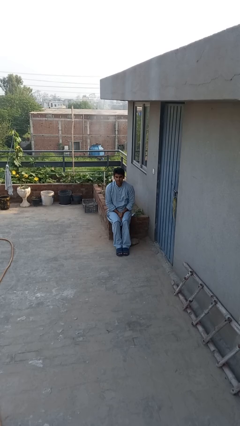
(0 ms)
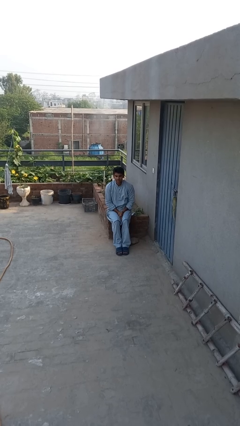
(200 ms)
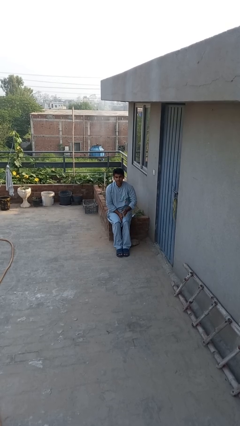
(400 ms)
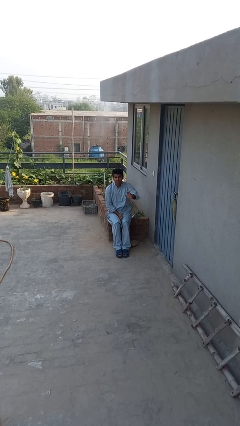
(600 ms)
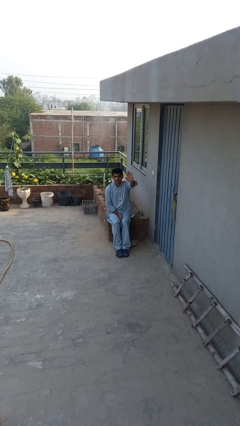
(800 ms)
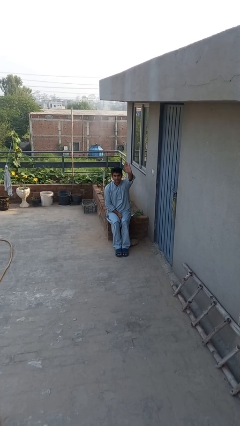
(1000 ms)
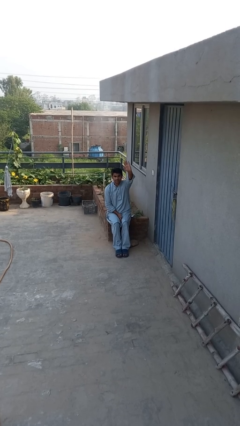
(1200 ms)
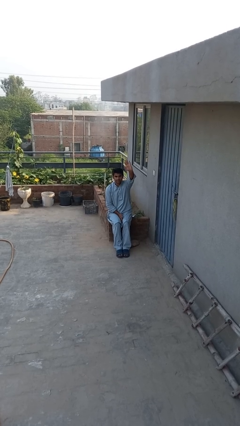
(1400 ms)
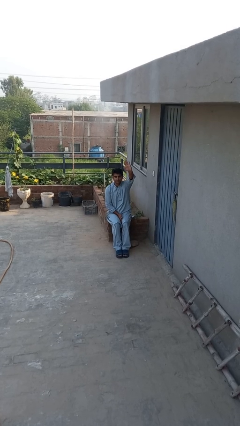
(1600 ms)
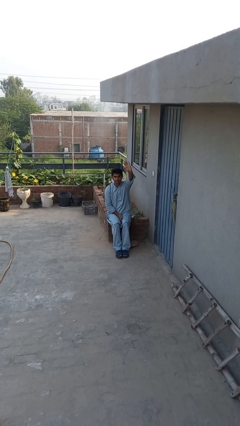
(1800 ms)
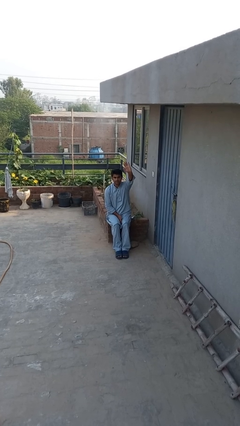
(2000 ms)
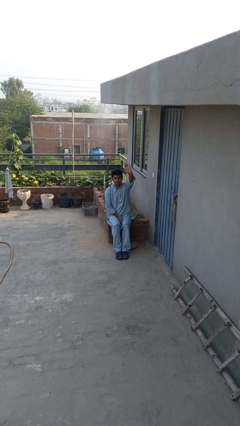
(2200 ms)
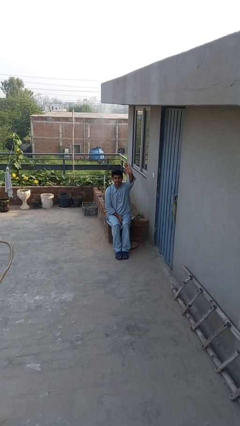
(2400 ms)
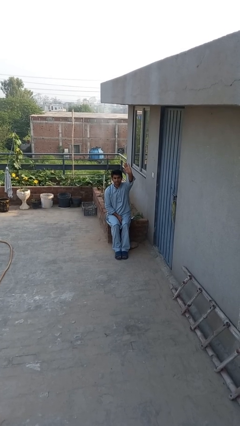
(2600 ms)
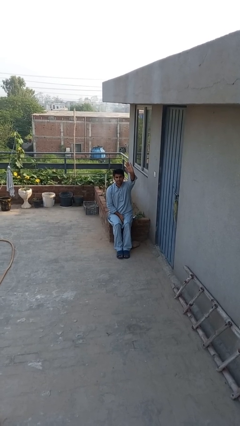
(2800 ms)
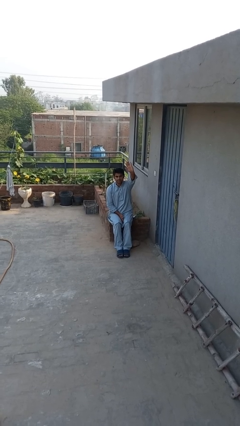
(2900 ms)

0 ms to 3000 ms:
person gestures raise hand

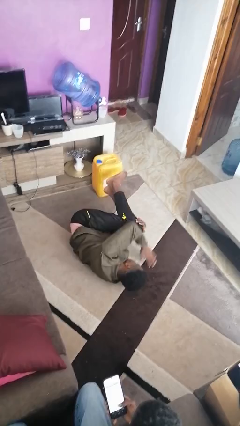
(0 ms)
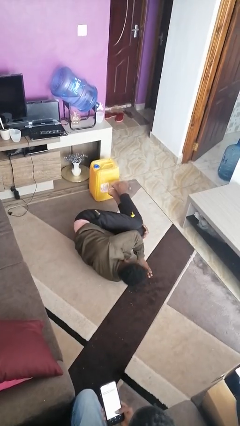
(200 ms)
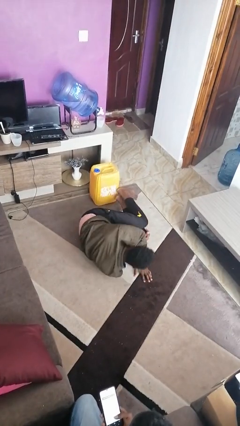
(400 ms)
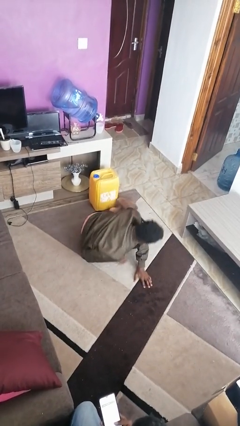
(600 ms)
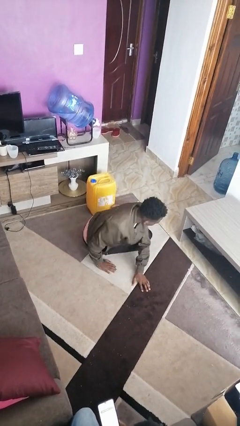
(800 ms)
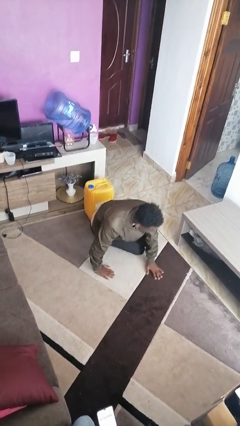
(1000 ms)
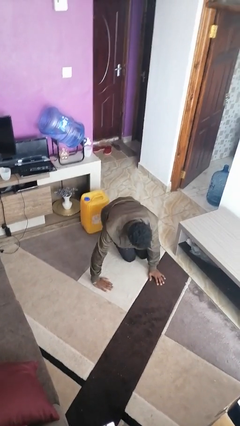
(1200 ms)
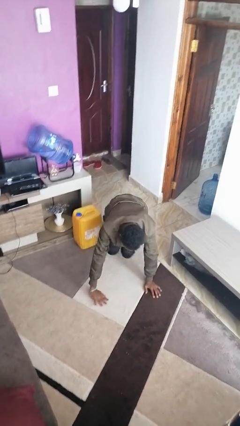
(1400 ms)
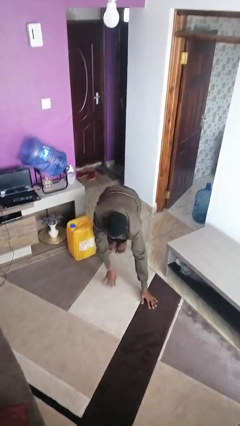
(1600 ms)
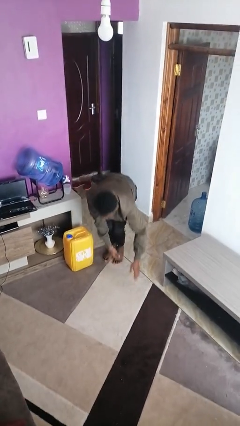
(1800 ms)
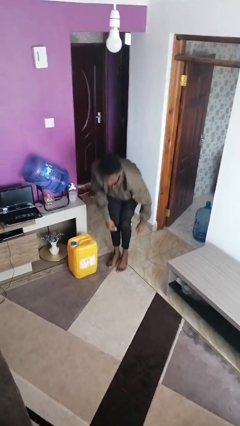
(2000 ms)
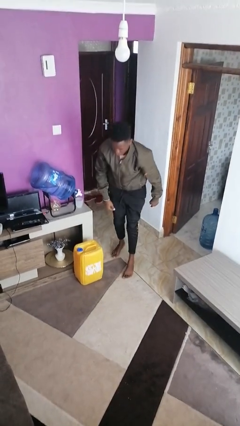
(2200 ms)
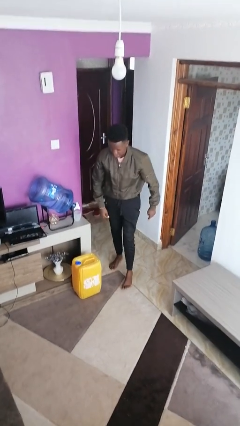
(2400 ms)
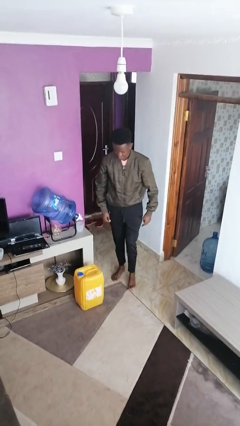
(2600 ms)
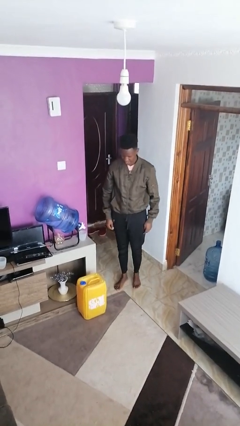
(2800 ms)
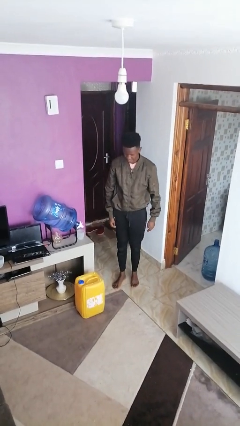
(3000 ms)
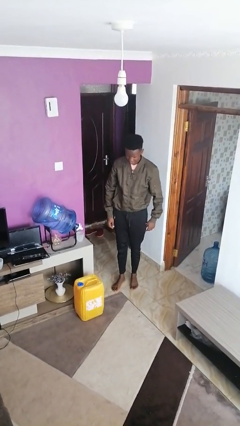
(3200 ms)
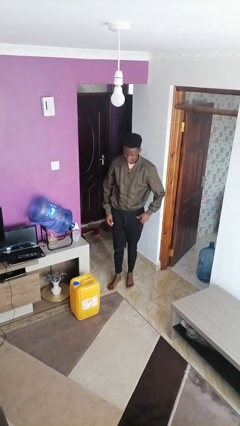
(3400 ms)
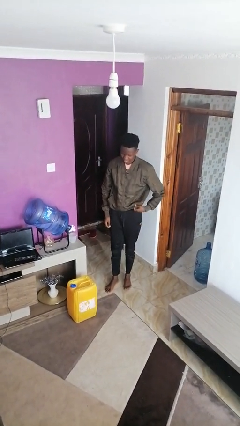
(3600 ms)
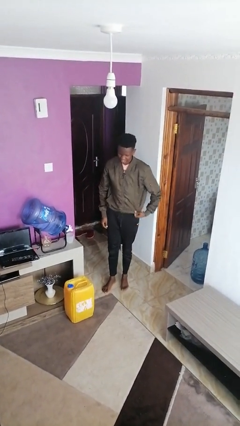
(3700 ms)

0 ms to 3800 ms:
person stands up from floor

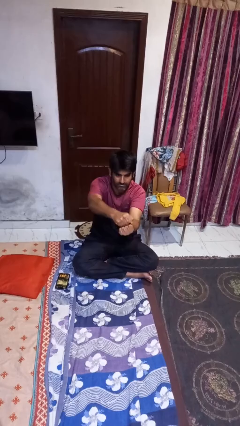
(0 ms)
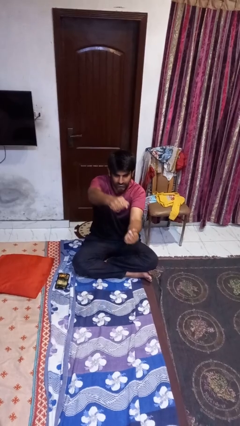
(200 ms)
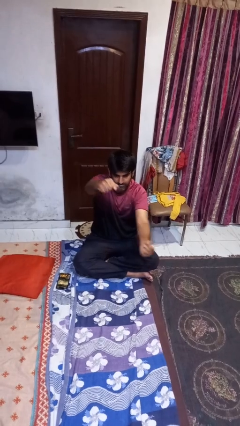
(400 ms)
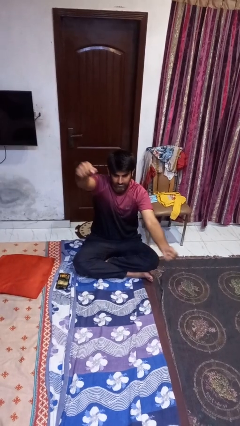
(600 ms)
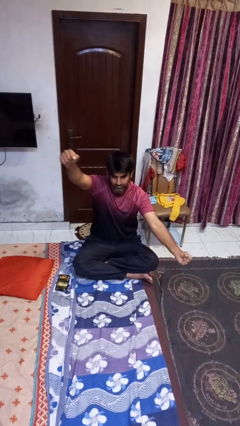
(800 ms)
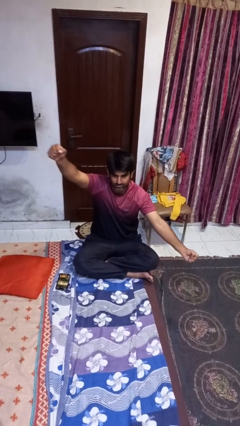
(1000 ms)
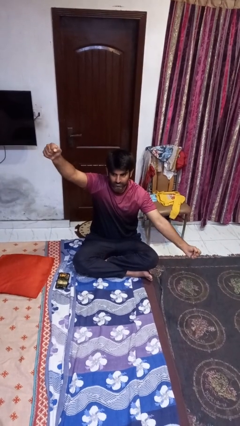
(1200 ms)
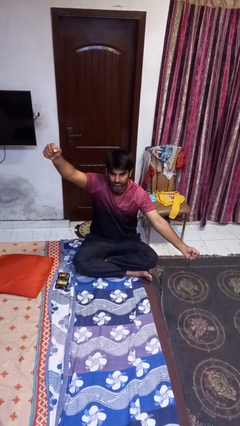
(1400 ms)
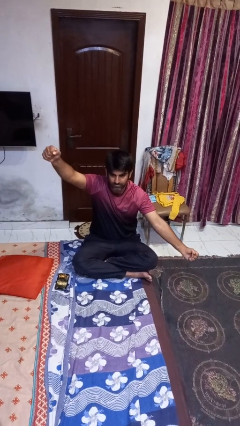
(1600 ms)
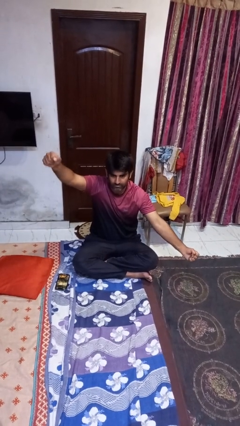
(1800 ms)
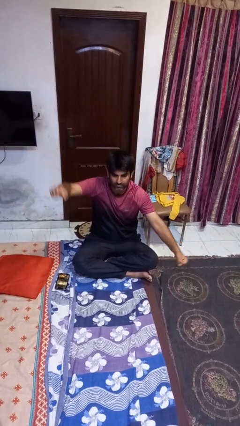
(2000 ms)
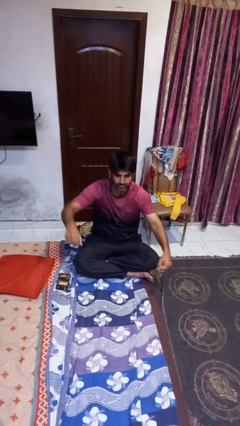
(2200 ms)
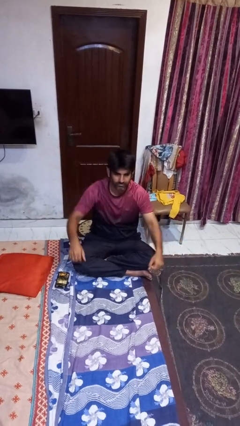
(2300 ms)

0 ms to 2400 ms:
person gestures zoom out

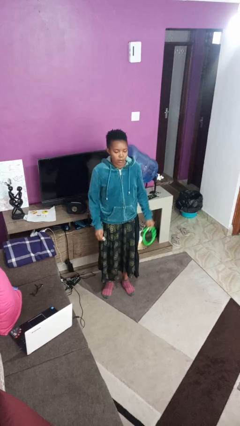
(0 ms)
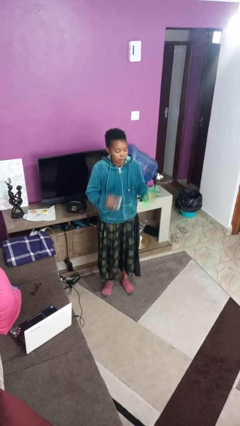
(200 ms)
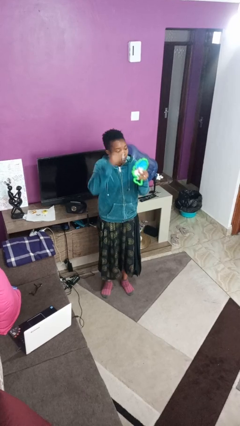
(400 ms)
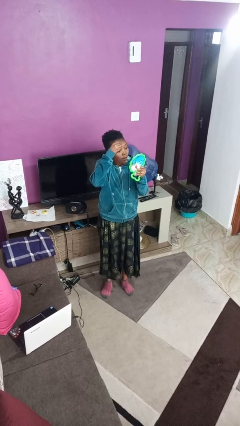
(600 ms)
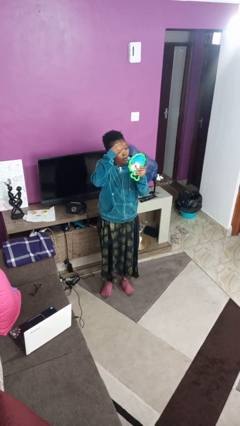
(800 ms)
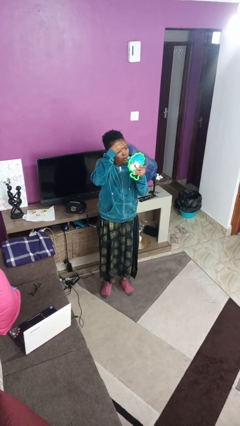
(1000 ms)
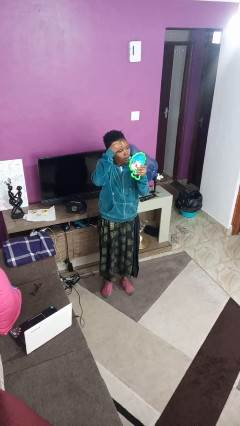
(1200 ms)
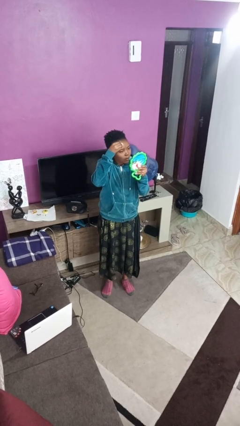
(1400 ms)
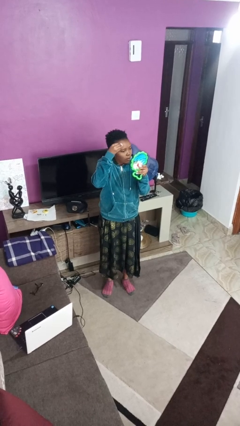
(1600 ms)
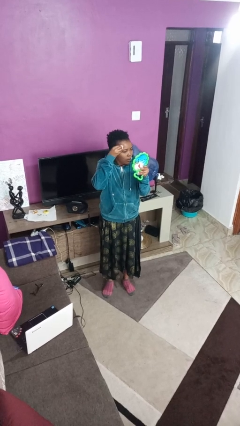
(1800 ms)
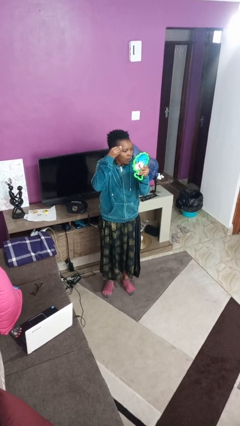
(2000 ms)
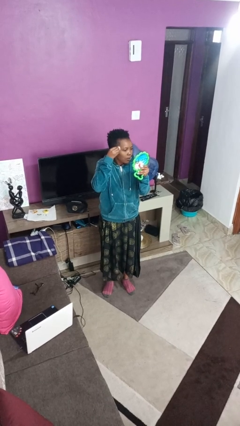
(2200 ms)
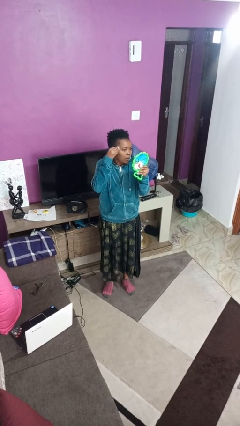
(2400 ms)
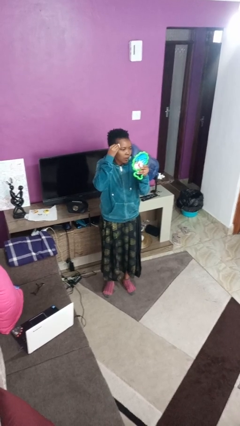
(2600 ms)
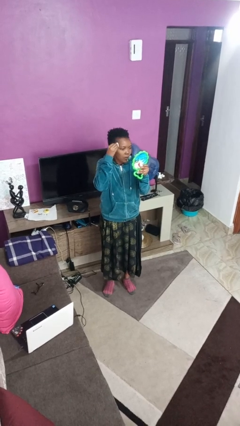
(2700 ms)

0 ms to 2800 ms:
person applies foundation makeup

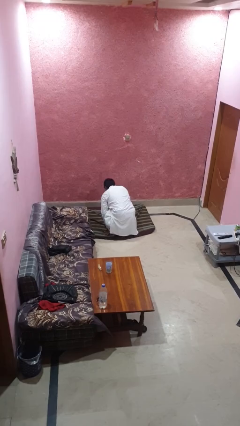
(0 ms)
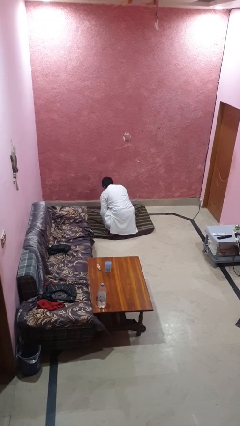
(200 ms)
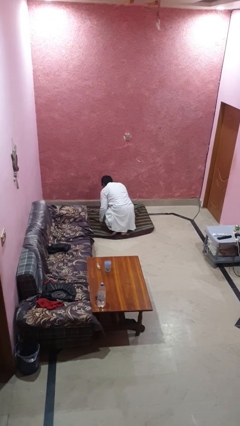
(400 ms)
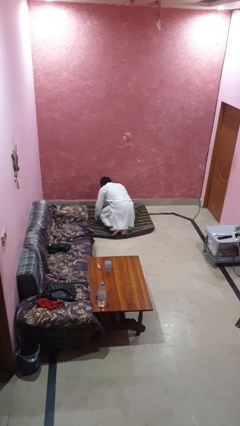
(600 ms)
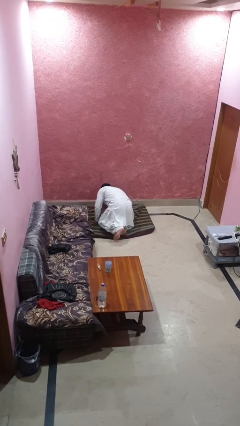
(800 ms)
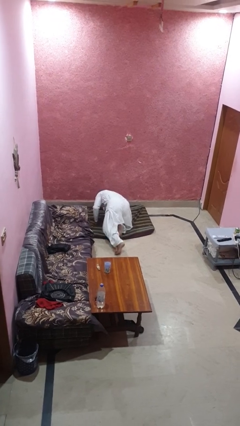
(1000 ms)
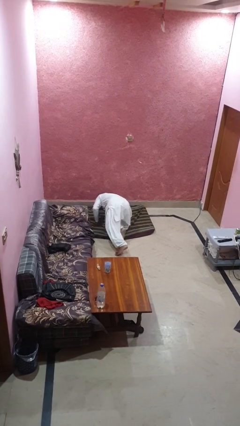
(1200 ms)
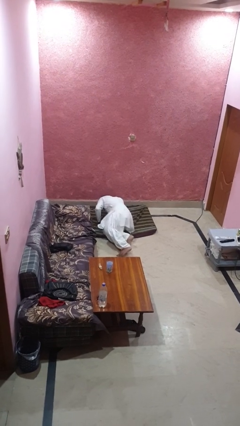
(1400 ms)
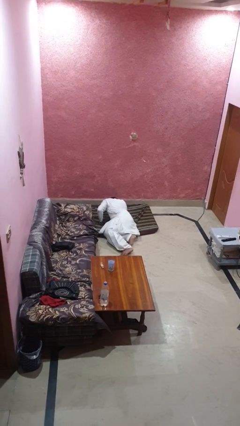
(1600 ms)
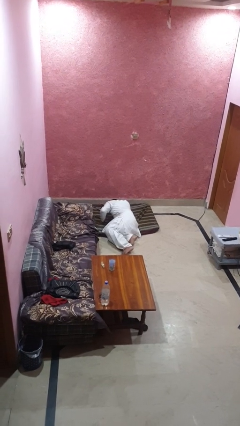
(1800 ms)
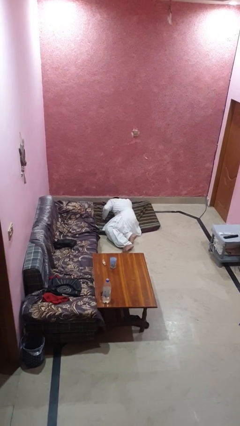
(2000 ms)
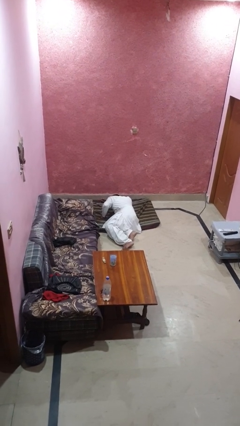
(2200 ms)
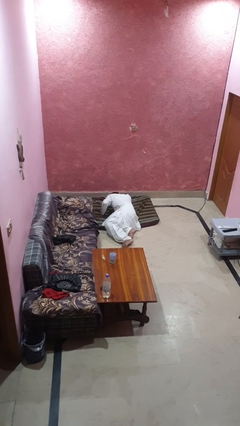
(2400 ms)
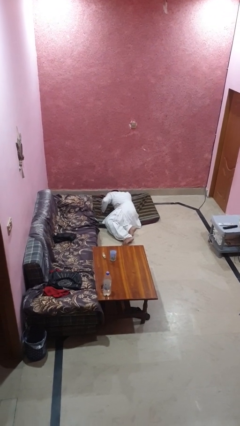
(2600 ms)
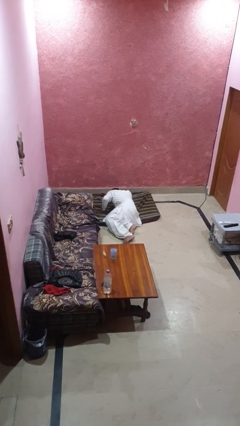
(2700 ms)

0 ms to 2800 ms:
person lies down on floor

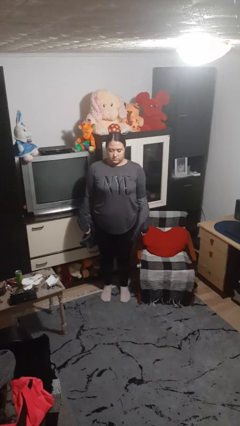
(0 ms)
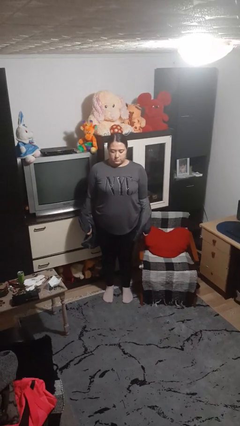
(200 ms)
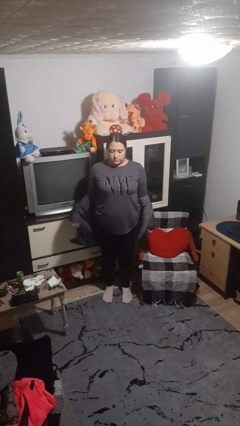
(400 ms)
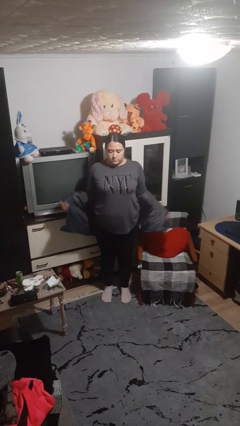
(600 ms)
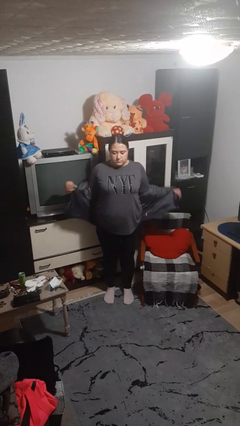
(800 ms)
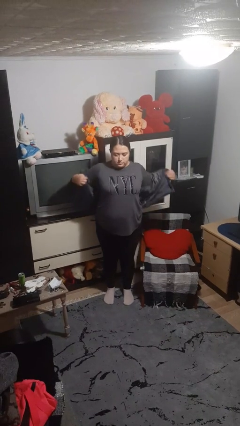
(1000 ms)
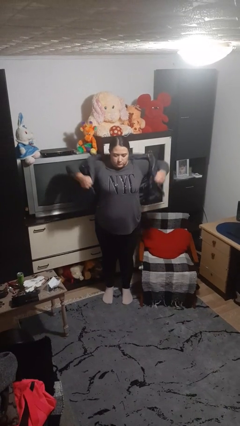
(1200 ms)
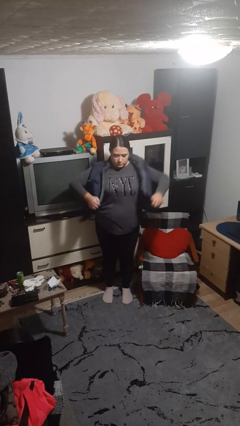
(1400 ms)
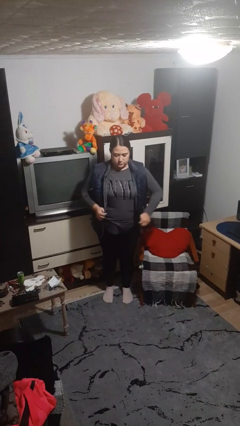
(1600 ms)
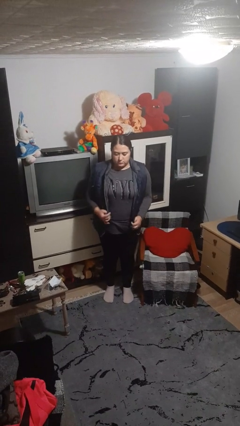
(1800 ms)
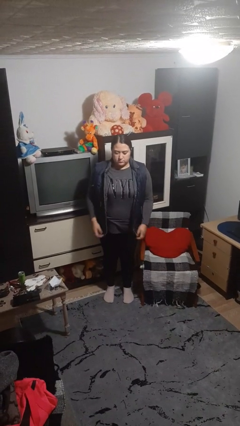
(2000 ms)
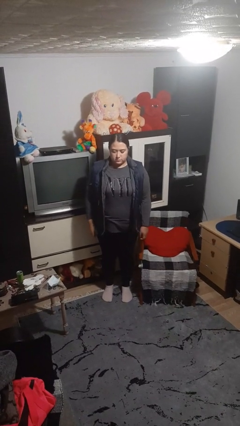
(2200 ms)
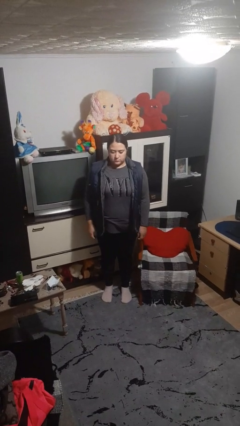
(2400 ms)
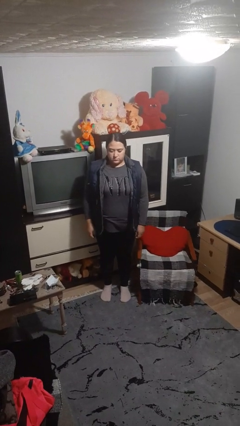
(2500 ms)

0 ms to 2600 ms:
person puts on jacket
